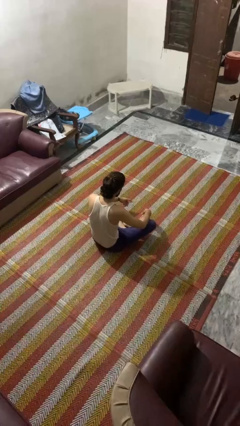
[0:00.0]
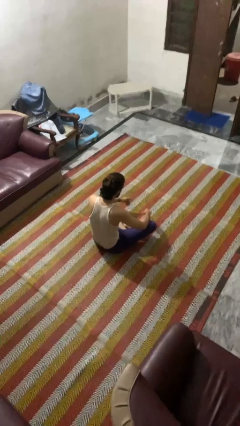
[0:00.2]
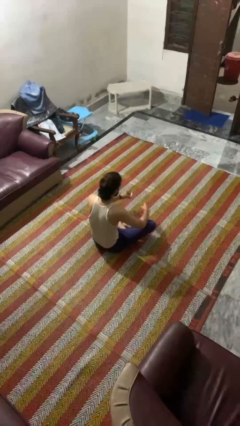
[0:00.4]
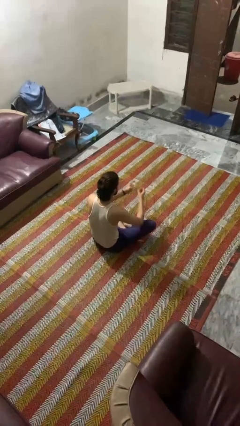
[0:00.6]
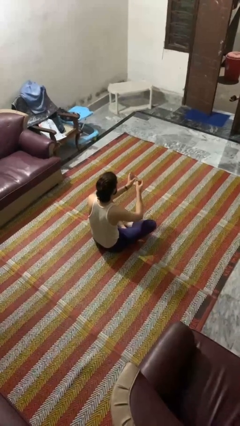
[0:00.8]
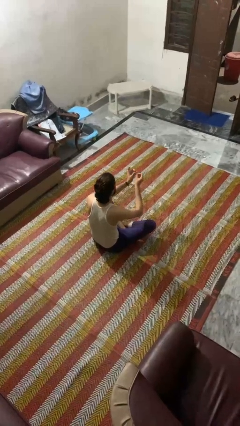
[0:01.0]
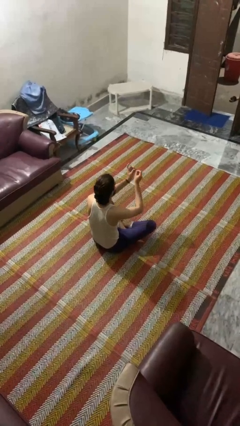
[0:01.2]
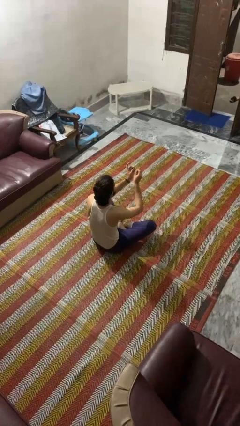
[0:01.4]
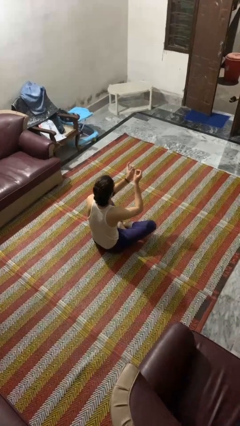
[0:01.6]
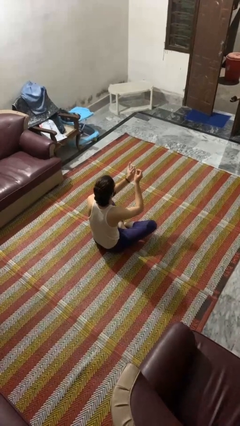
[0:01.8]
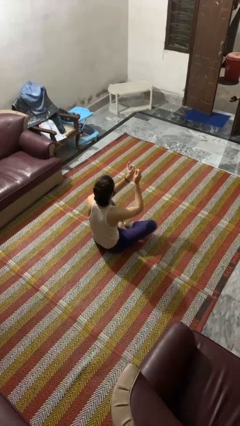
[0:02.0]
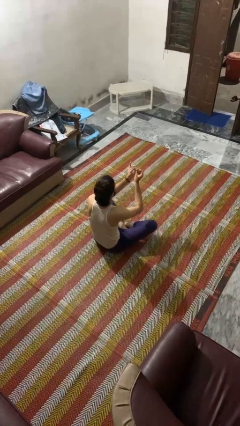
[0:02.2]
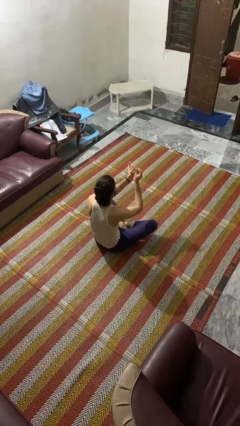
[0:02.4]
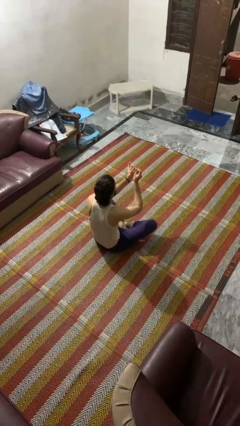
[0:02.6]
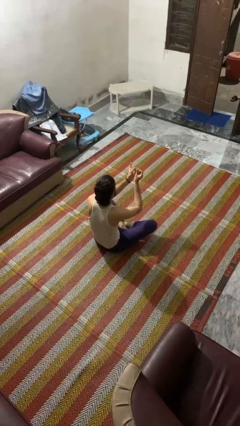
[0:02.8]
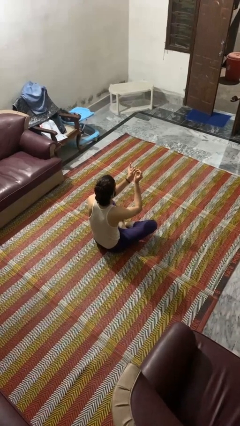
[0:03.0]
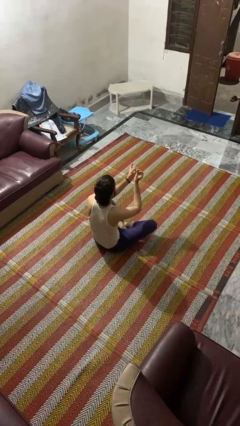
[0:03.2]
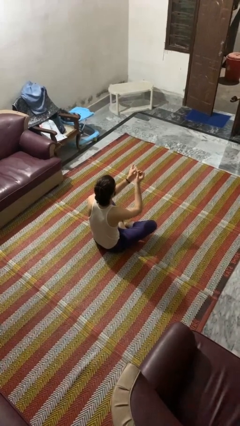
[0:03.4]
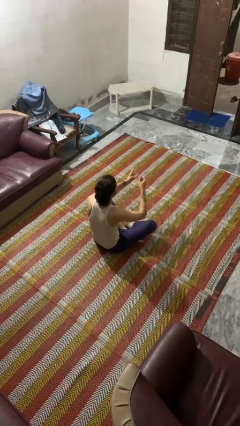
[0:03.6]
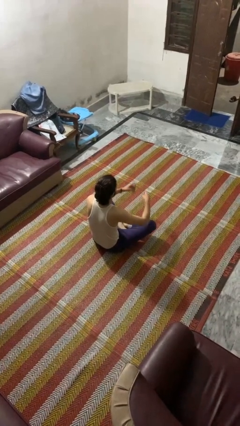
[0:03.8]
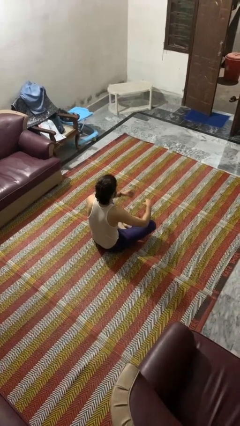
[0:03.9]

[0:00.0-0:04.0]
person clips fingernails

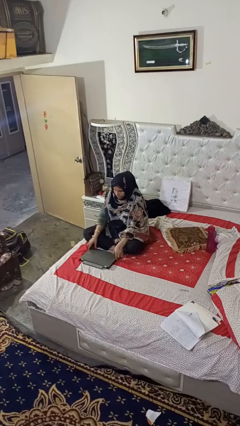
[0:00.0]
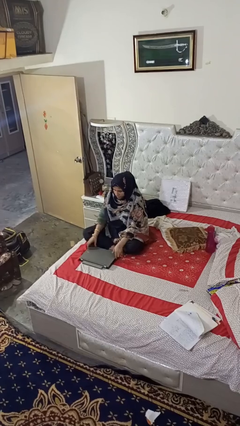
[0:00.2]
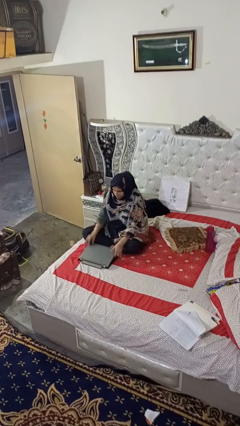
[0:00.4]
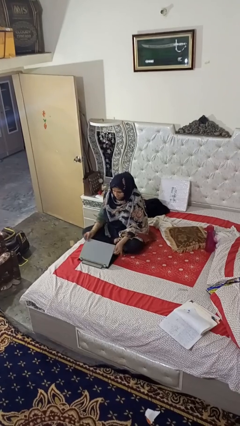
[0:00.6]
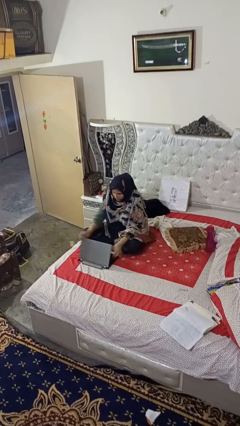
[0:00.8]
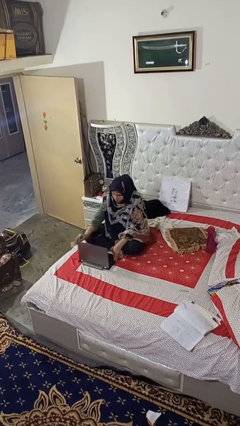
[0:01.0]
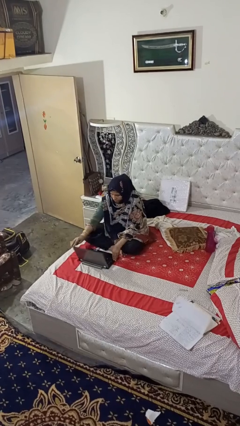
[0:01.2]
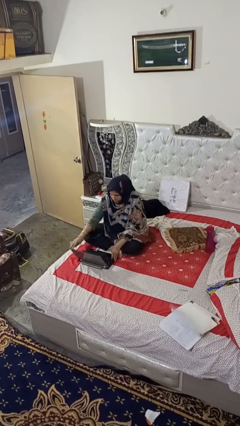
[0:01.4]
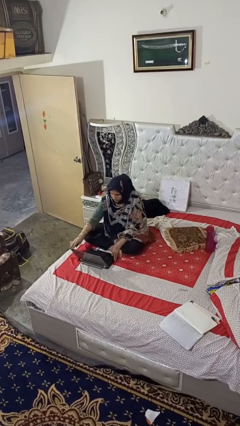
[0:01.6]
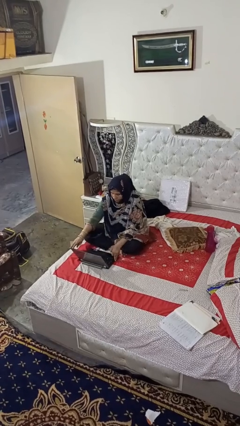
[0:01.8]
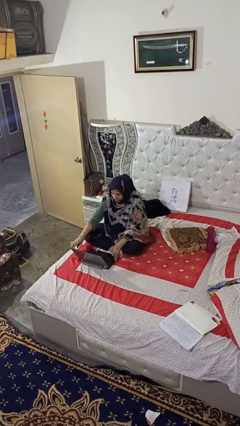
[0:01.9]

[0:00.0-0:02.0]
person opens laptop

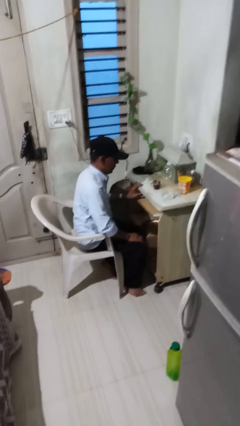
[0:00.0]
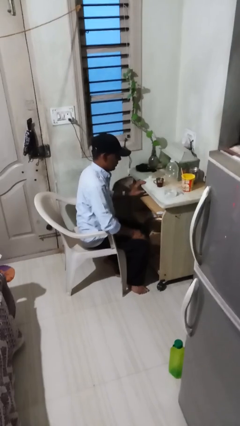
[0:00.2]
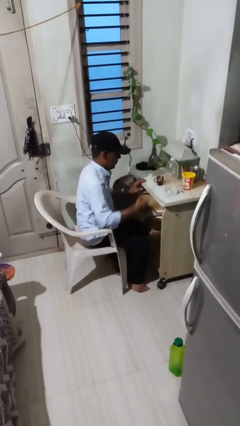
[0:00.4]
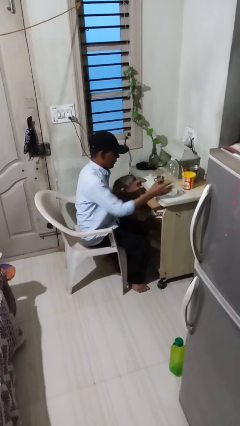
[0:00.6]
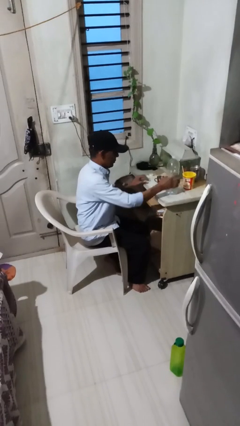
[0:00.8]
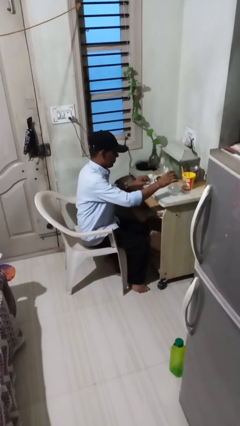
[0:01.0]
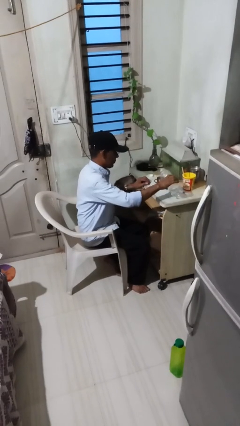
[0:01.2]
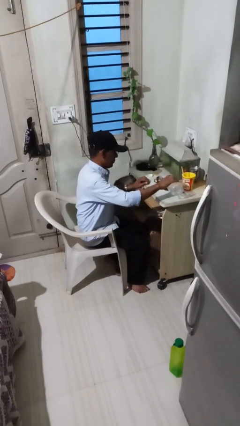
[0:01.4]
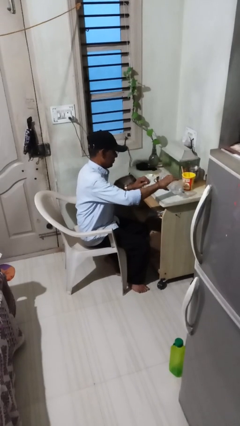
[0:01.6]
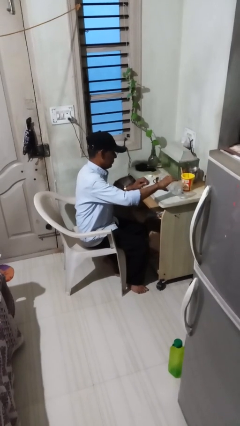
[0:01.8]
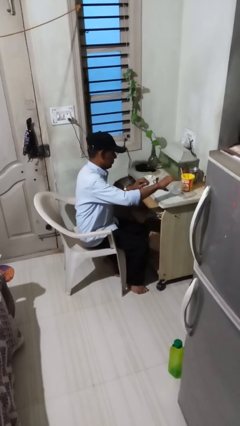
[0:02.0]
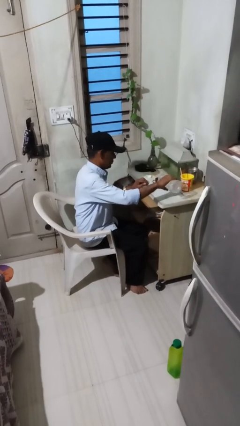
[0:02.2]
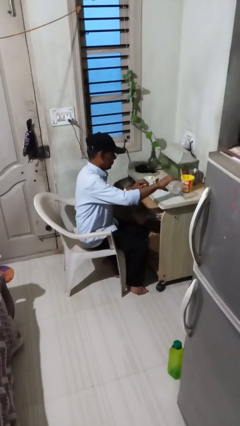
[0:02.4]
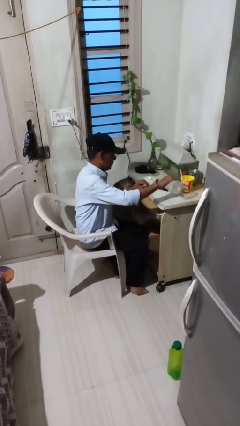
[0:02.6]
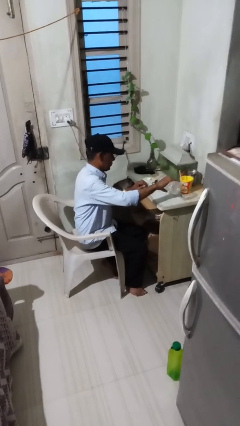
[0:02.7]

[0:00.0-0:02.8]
person pours liquid into cup

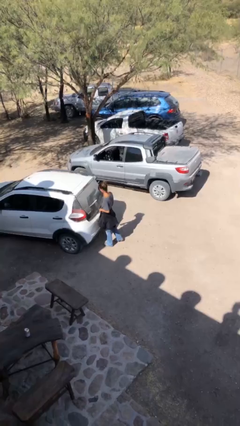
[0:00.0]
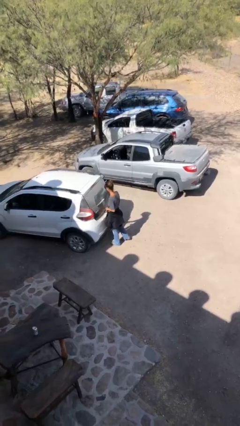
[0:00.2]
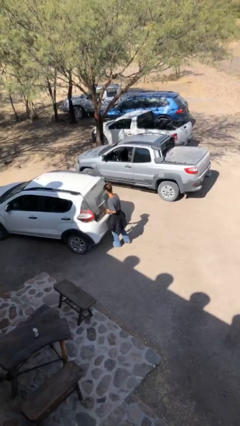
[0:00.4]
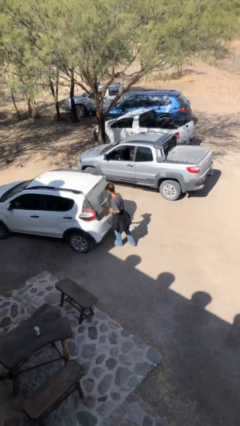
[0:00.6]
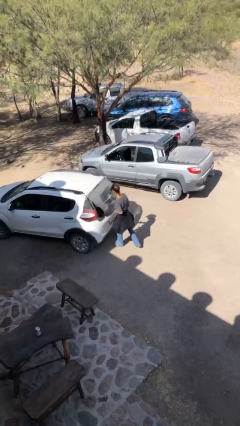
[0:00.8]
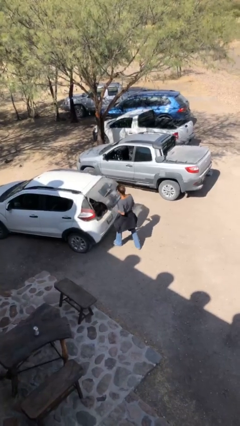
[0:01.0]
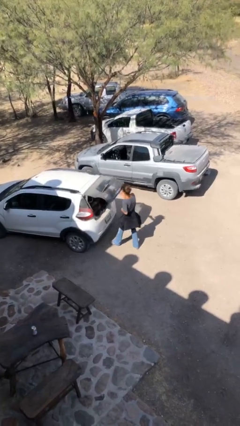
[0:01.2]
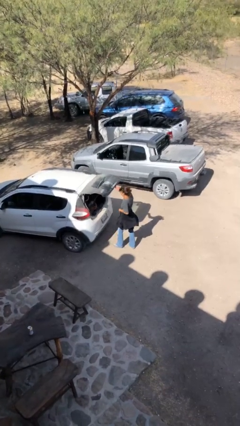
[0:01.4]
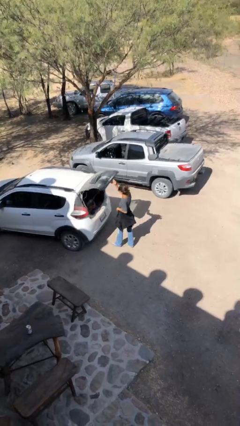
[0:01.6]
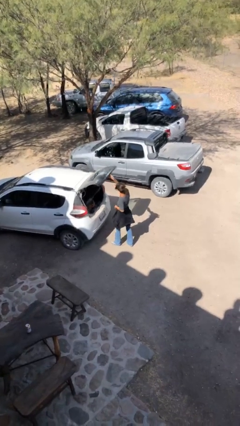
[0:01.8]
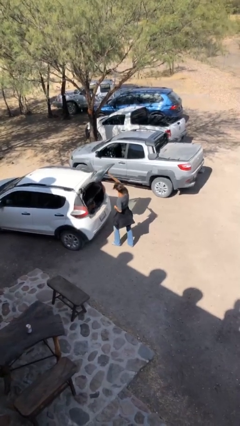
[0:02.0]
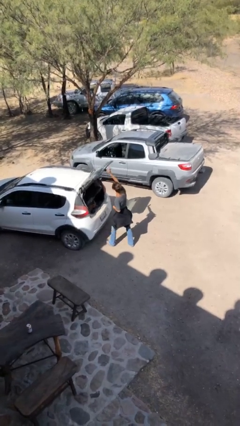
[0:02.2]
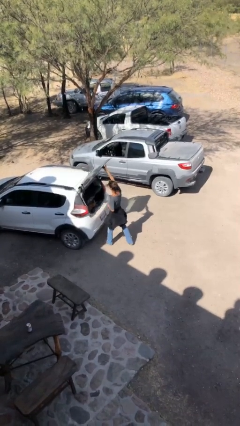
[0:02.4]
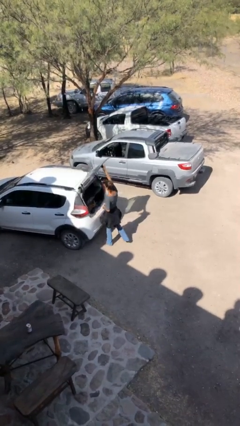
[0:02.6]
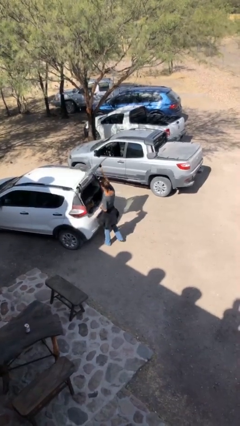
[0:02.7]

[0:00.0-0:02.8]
person opens car trunk

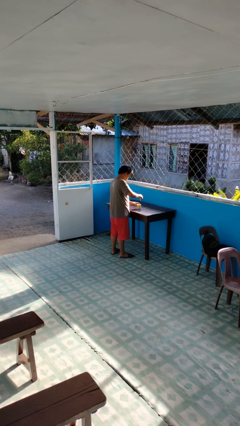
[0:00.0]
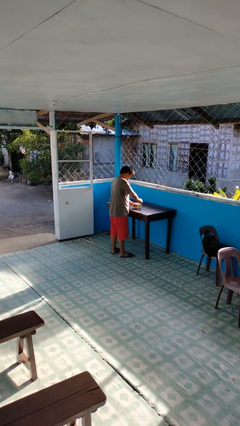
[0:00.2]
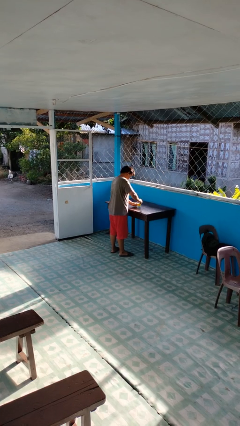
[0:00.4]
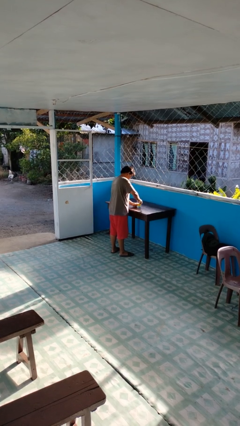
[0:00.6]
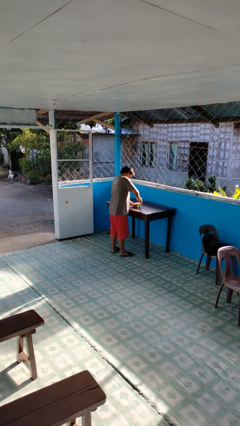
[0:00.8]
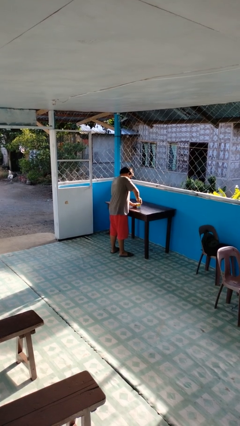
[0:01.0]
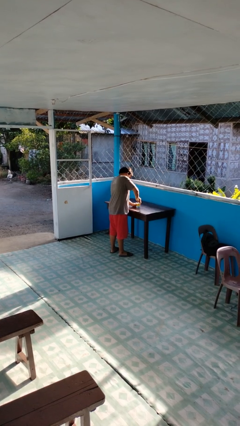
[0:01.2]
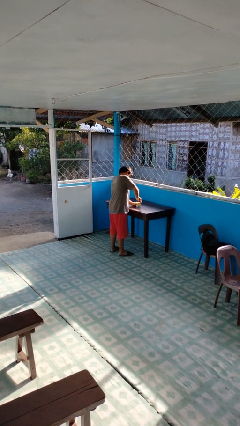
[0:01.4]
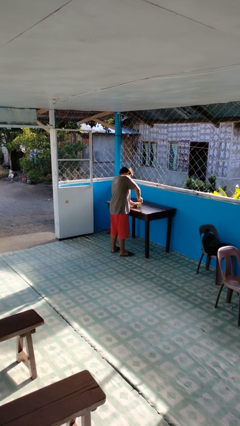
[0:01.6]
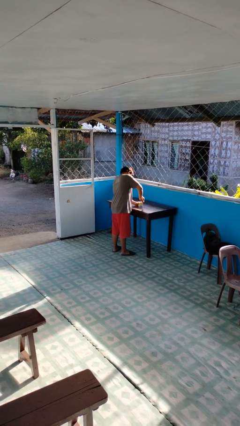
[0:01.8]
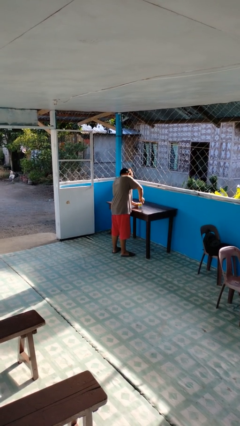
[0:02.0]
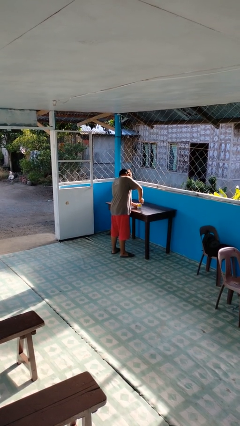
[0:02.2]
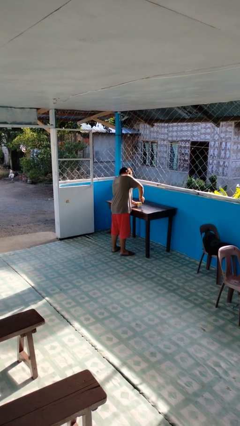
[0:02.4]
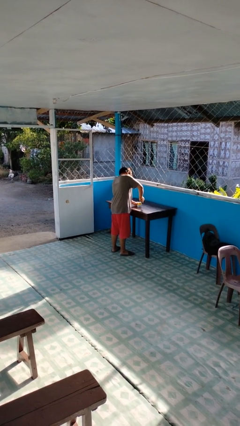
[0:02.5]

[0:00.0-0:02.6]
person opens can with can opener

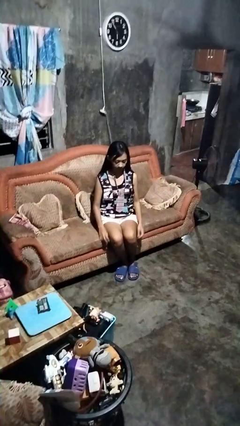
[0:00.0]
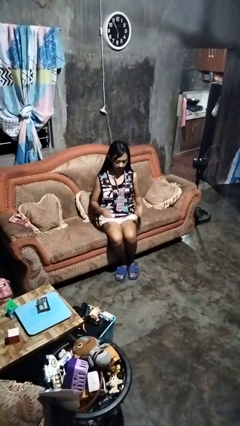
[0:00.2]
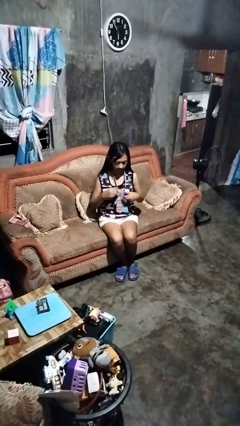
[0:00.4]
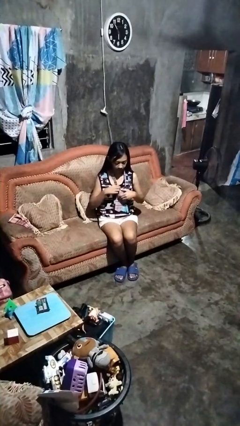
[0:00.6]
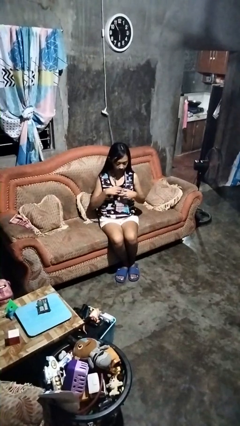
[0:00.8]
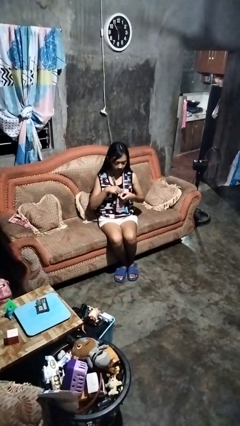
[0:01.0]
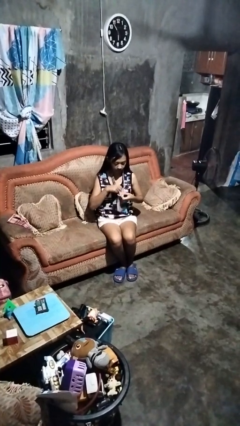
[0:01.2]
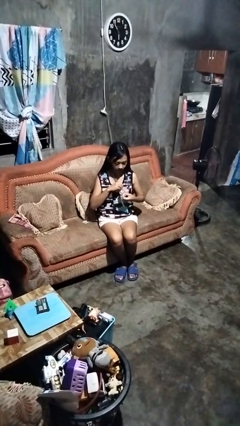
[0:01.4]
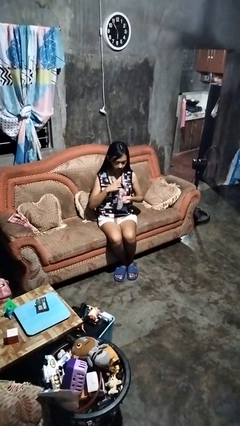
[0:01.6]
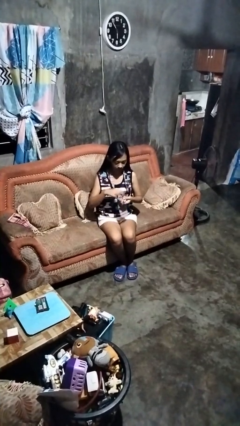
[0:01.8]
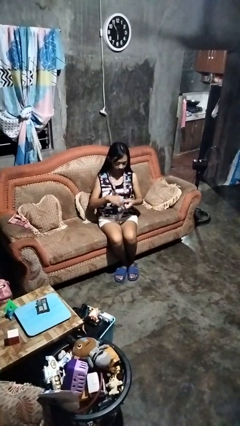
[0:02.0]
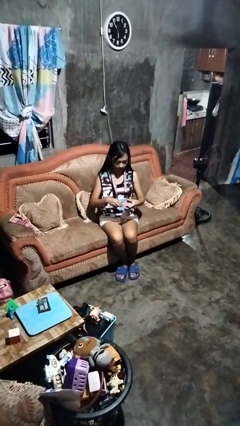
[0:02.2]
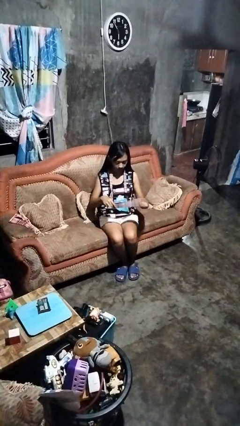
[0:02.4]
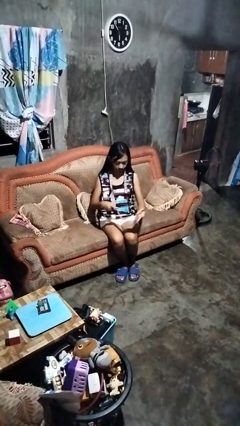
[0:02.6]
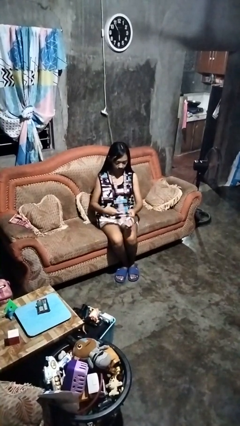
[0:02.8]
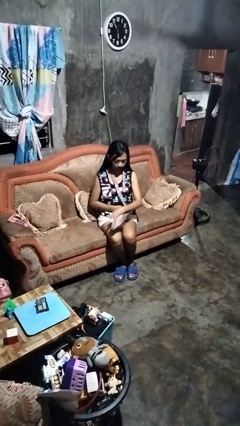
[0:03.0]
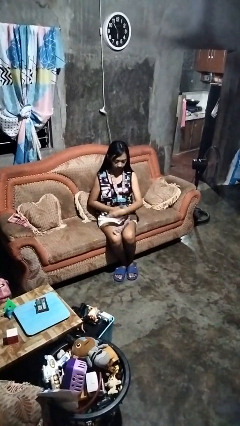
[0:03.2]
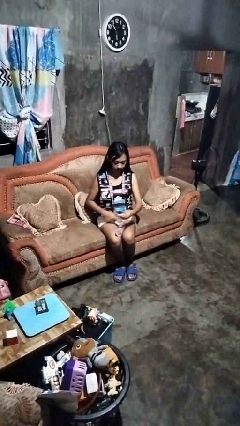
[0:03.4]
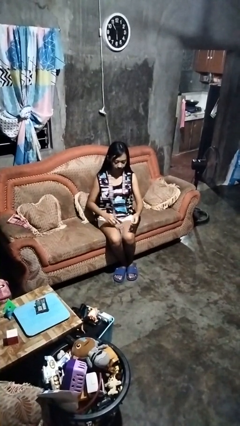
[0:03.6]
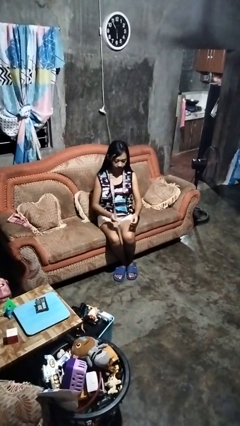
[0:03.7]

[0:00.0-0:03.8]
person takes off necktie
